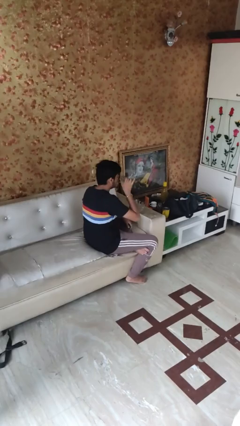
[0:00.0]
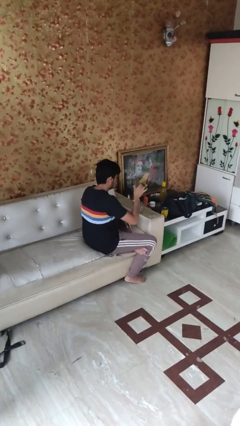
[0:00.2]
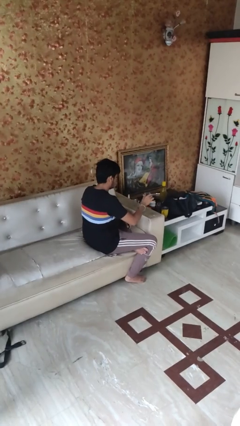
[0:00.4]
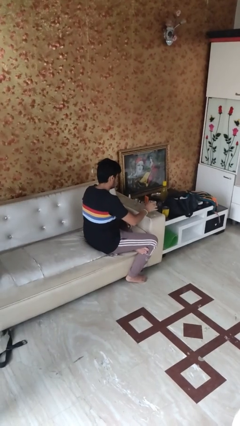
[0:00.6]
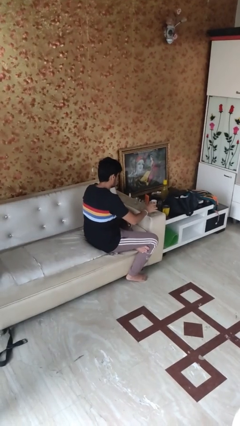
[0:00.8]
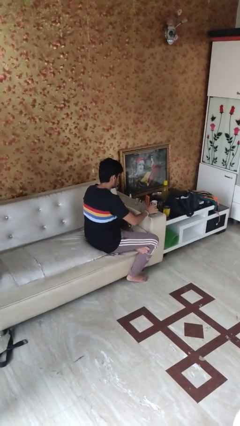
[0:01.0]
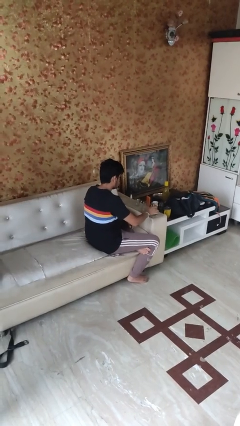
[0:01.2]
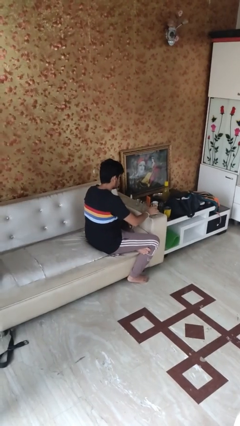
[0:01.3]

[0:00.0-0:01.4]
person puts down object on table

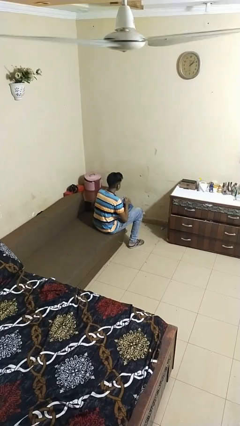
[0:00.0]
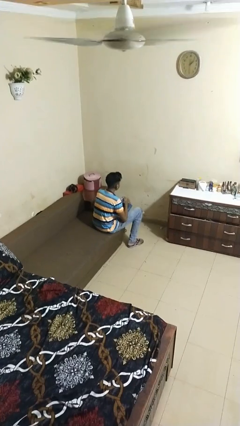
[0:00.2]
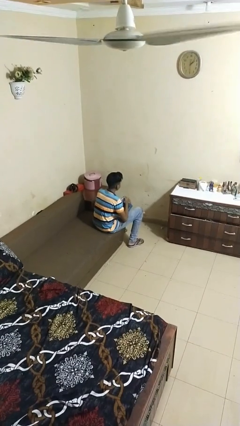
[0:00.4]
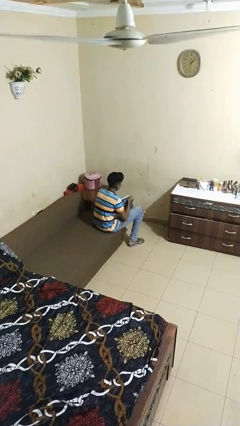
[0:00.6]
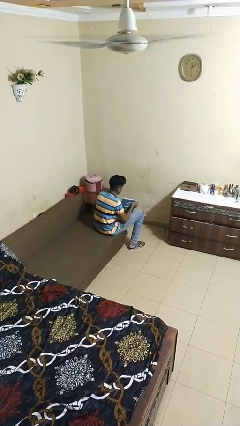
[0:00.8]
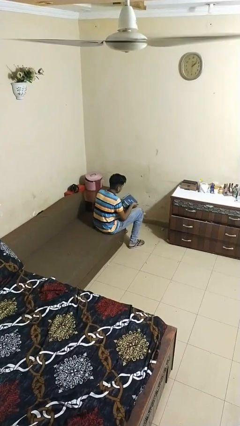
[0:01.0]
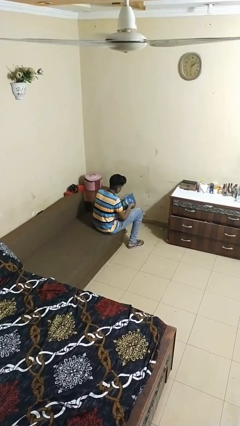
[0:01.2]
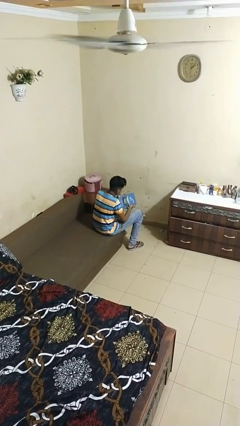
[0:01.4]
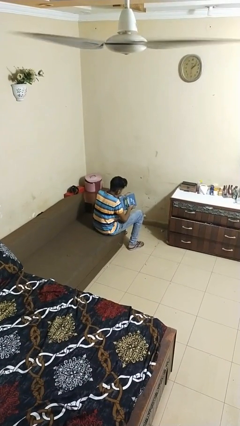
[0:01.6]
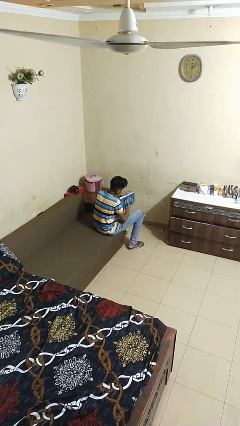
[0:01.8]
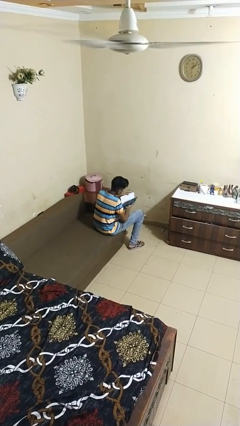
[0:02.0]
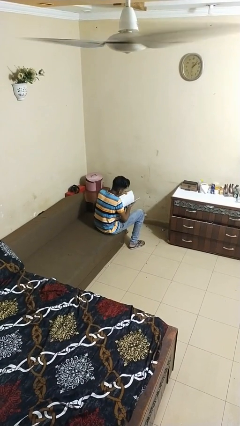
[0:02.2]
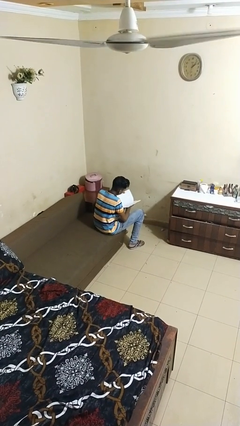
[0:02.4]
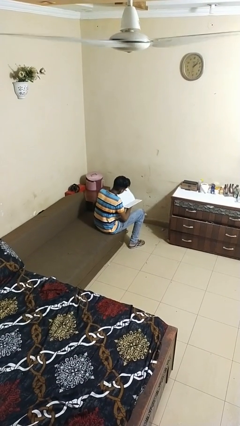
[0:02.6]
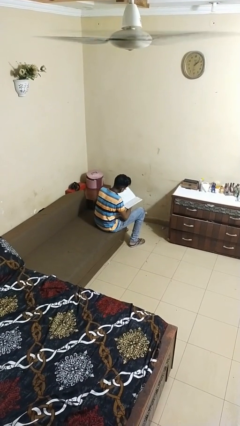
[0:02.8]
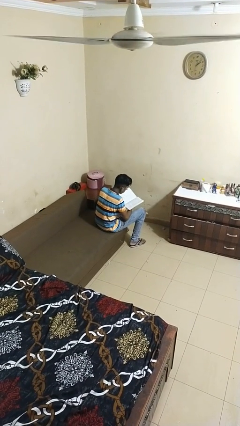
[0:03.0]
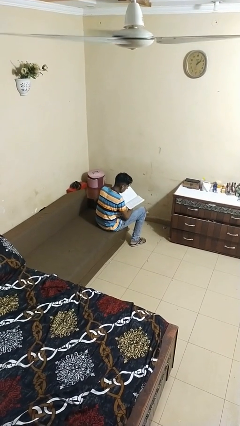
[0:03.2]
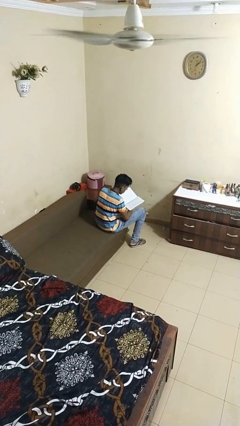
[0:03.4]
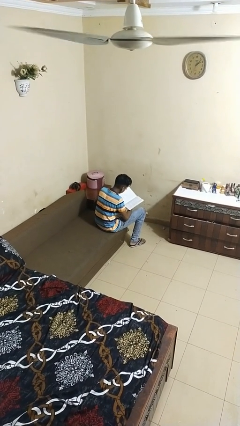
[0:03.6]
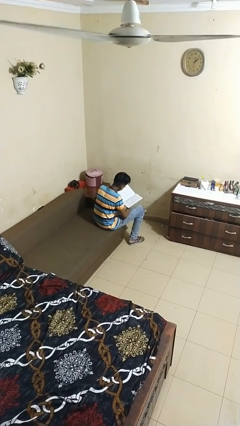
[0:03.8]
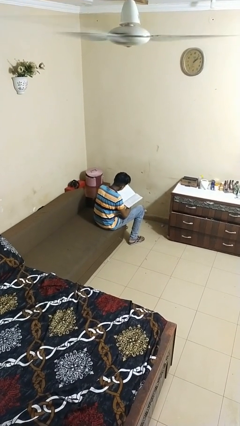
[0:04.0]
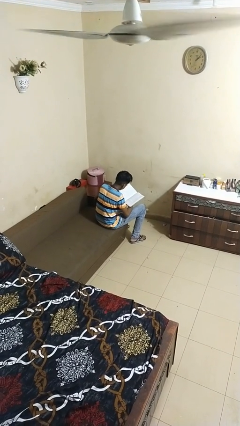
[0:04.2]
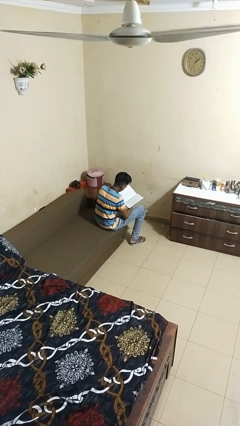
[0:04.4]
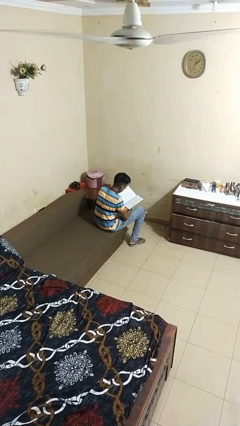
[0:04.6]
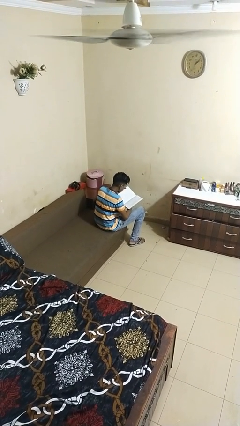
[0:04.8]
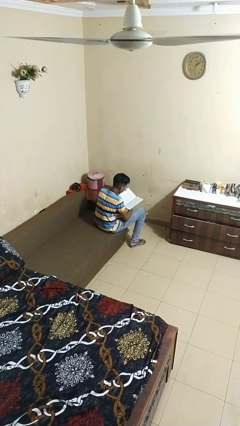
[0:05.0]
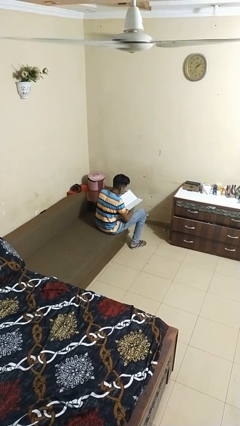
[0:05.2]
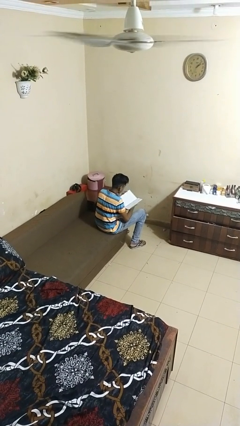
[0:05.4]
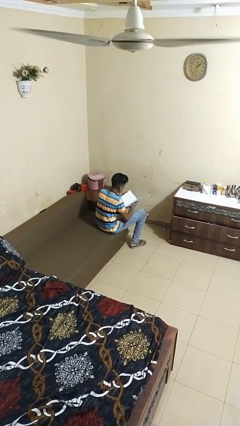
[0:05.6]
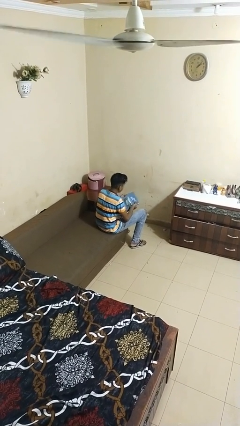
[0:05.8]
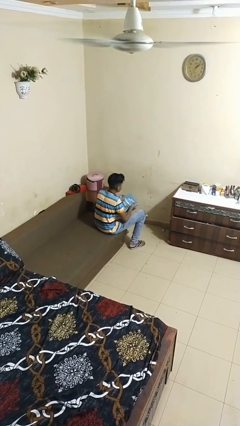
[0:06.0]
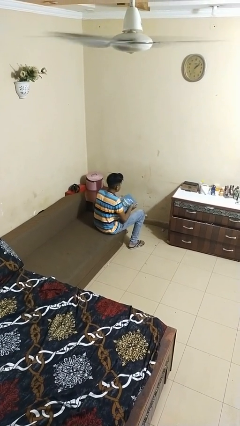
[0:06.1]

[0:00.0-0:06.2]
person reads book

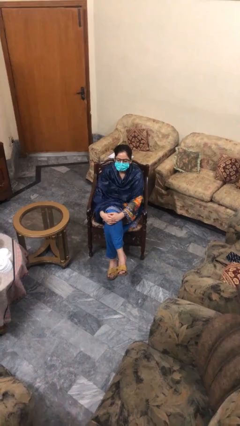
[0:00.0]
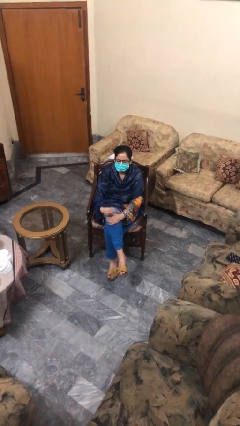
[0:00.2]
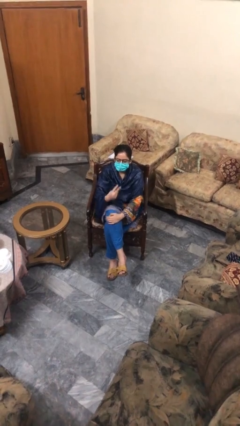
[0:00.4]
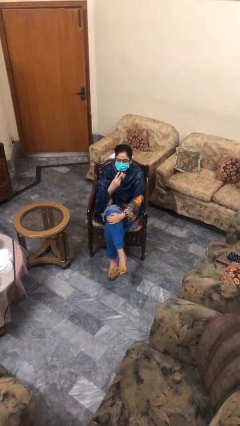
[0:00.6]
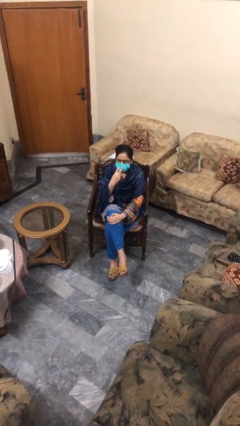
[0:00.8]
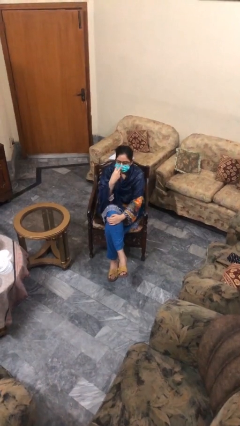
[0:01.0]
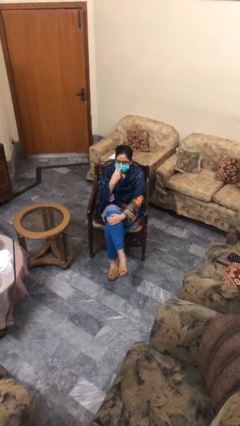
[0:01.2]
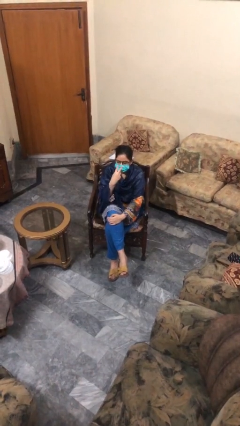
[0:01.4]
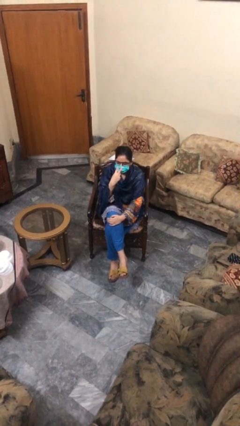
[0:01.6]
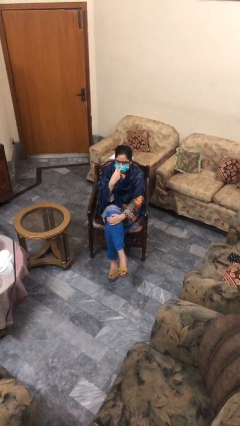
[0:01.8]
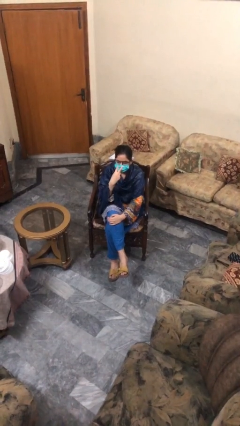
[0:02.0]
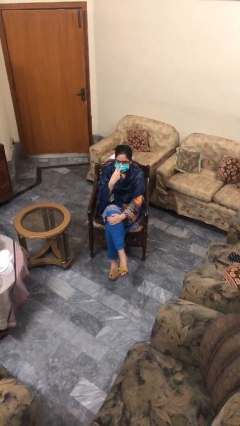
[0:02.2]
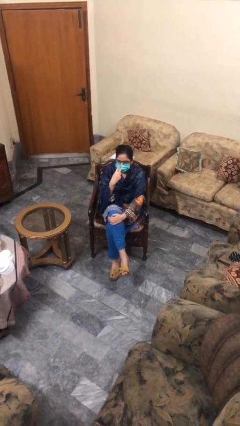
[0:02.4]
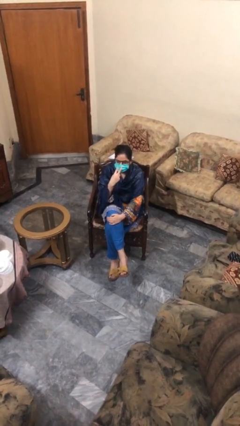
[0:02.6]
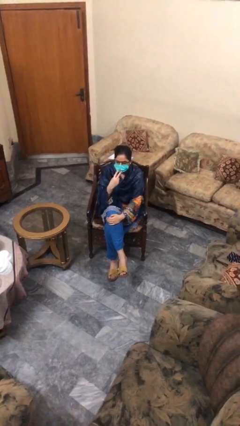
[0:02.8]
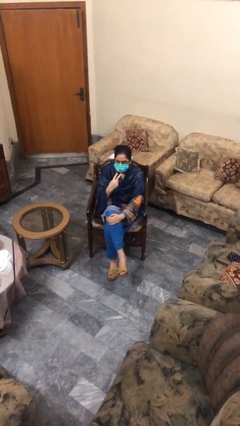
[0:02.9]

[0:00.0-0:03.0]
person gestures watch closely

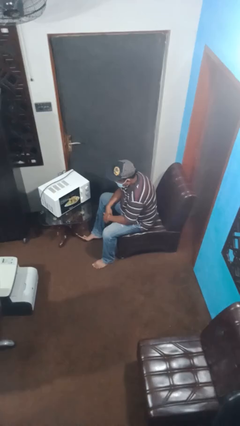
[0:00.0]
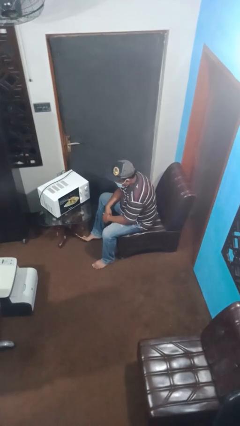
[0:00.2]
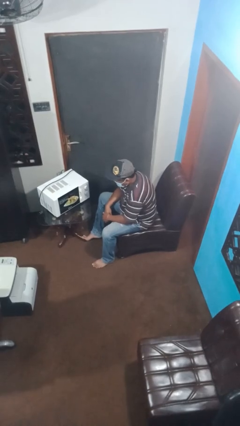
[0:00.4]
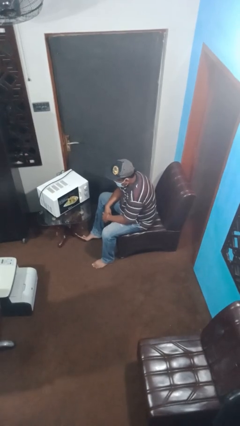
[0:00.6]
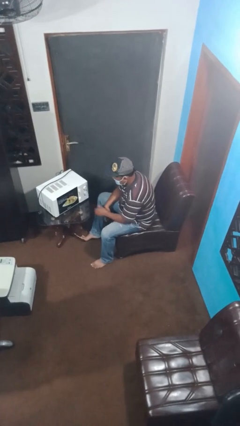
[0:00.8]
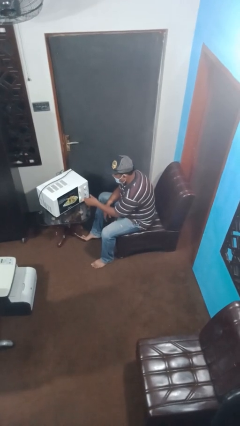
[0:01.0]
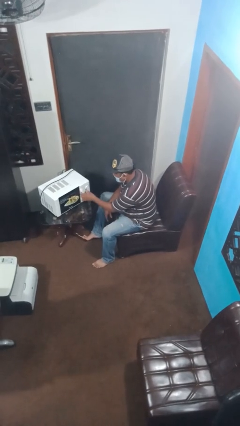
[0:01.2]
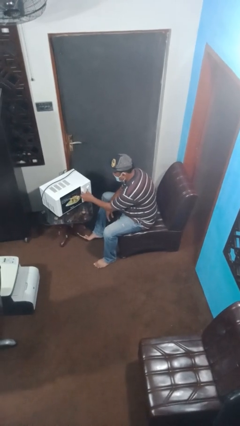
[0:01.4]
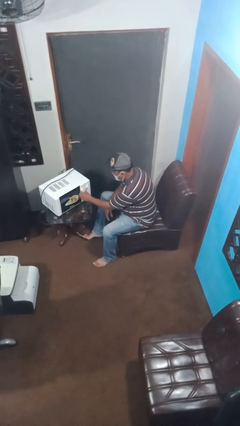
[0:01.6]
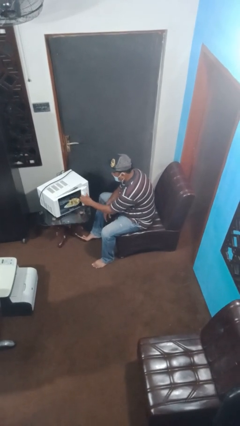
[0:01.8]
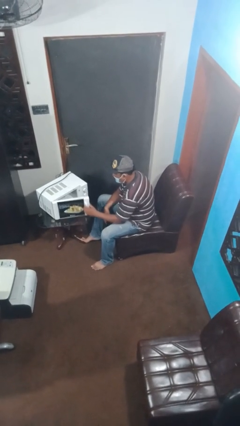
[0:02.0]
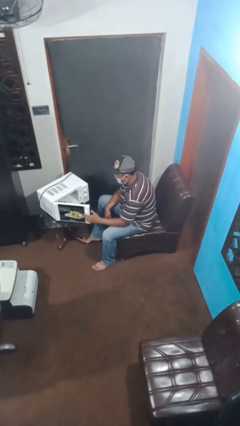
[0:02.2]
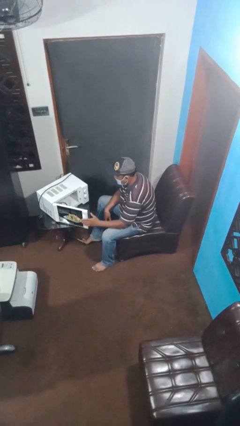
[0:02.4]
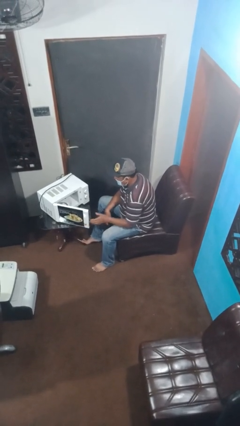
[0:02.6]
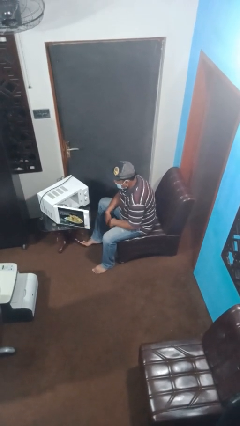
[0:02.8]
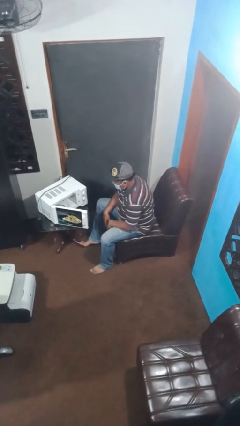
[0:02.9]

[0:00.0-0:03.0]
person opens microwave

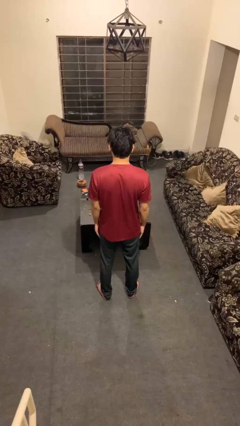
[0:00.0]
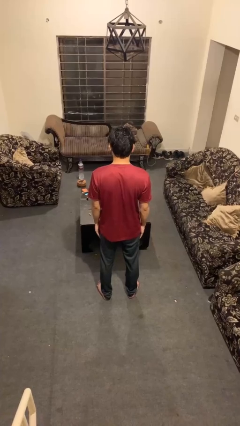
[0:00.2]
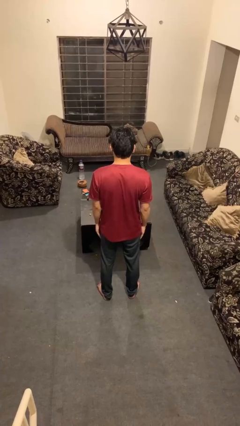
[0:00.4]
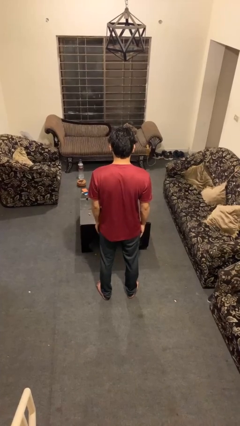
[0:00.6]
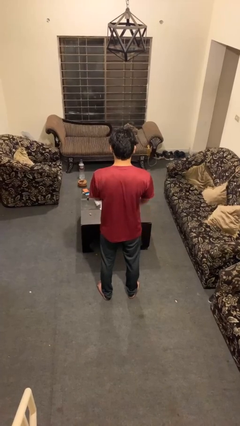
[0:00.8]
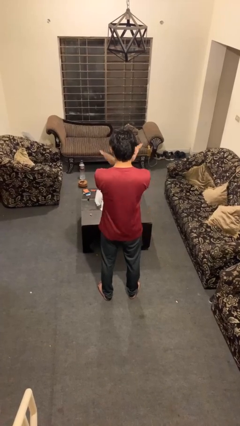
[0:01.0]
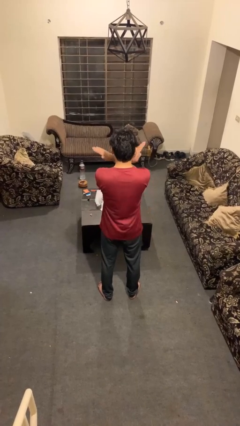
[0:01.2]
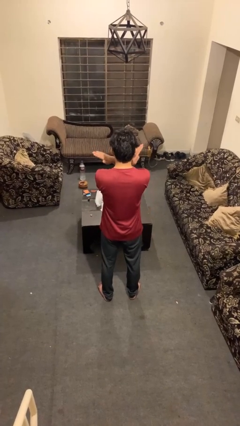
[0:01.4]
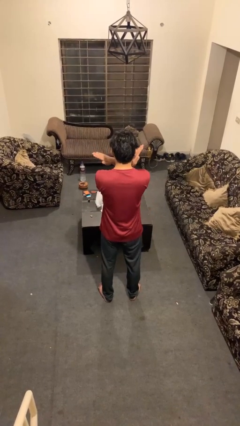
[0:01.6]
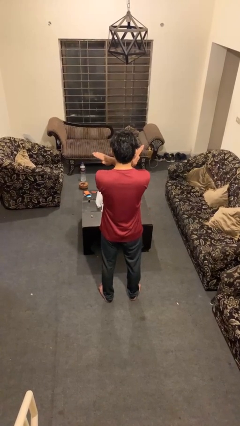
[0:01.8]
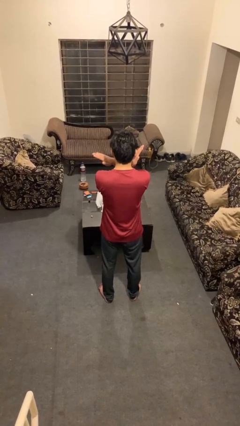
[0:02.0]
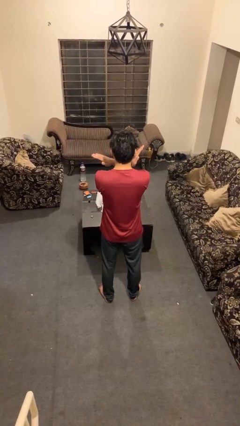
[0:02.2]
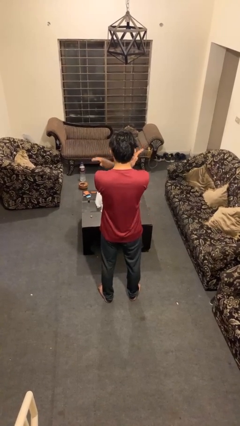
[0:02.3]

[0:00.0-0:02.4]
person gestures arms x

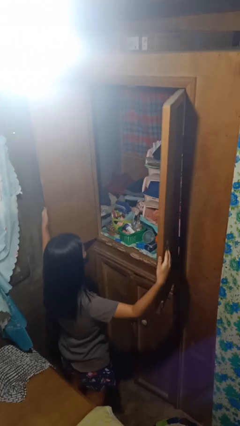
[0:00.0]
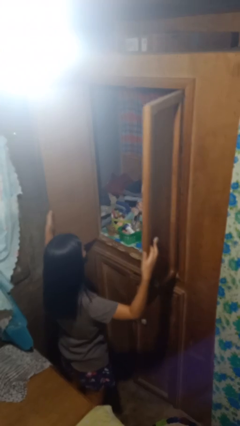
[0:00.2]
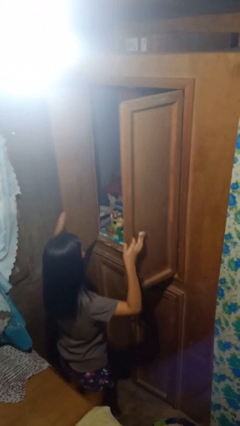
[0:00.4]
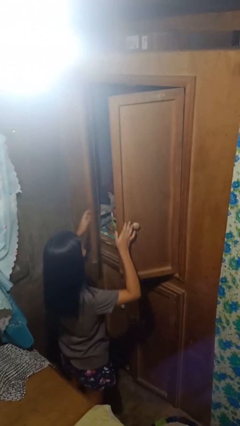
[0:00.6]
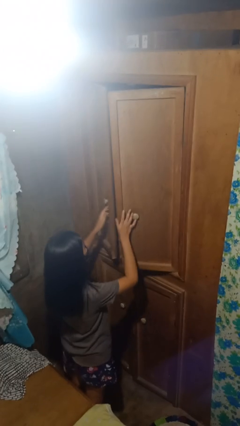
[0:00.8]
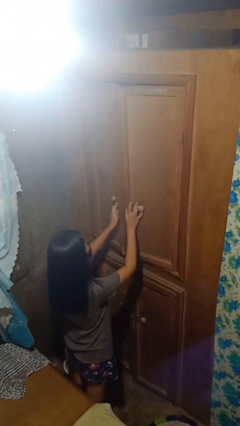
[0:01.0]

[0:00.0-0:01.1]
person closes closet door

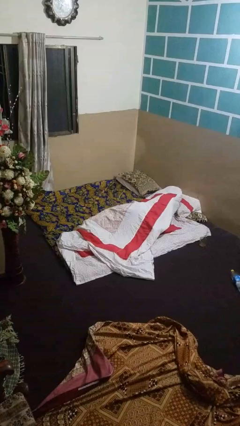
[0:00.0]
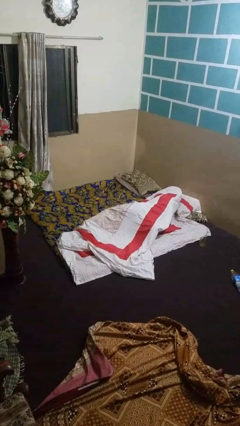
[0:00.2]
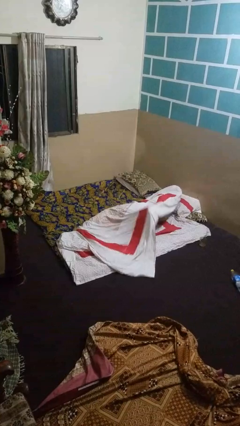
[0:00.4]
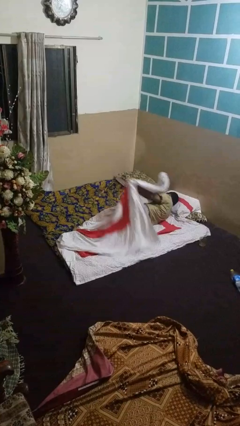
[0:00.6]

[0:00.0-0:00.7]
person uncovers with bedsheets
